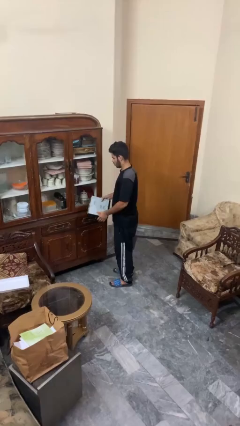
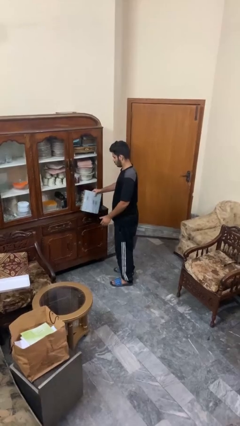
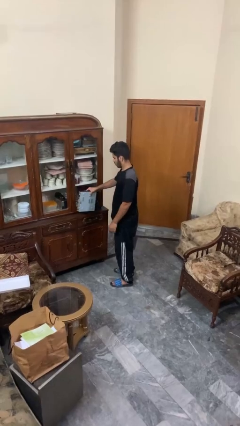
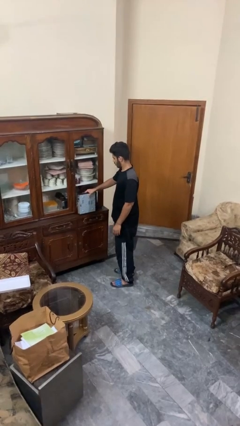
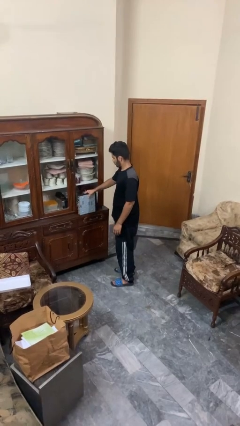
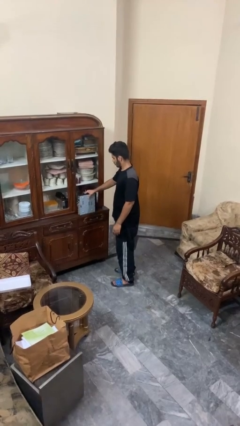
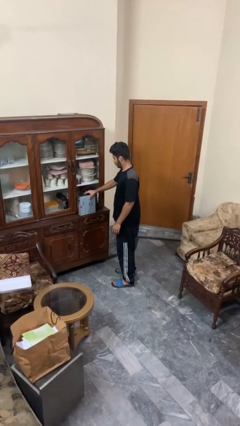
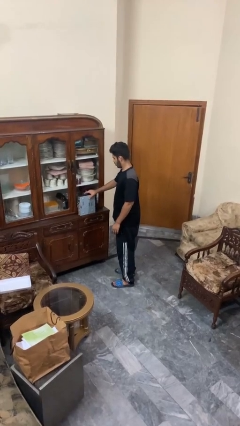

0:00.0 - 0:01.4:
person puts down object on countertop

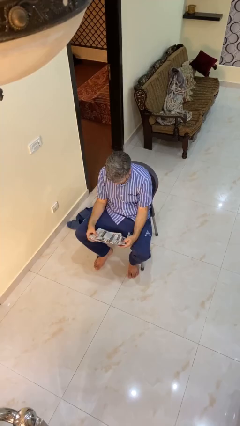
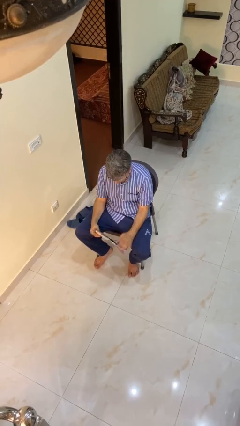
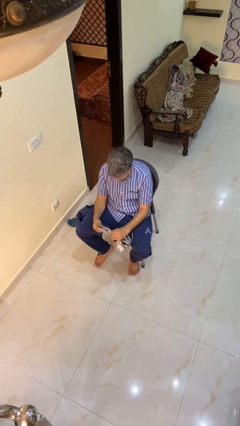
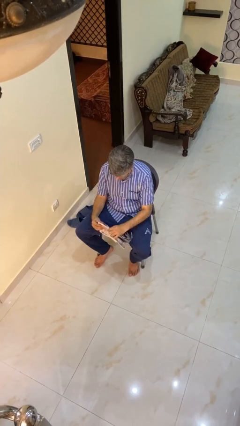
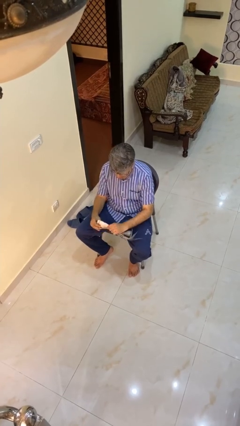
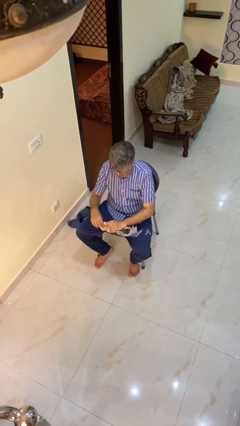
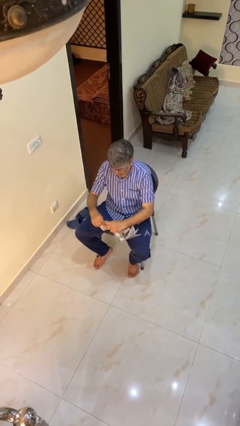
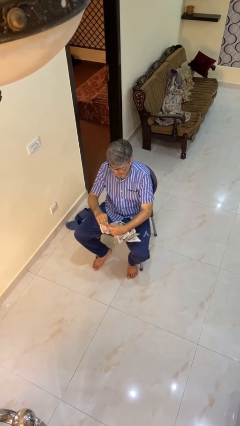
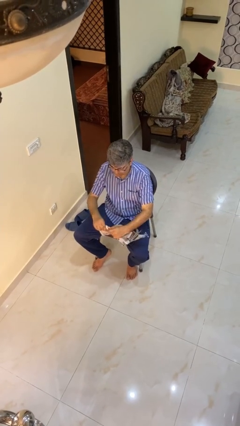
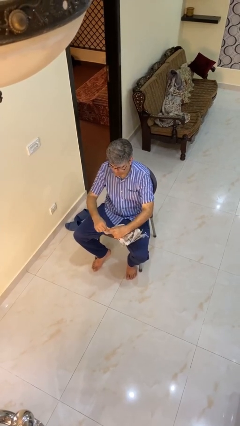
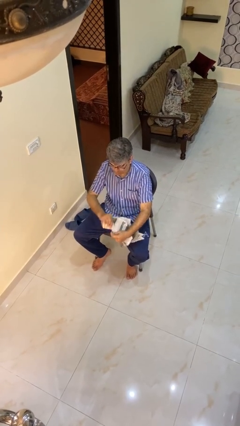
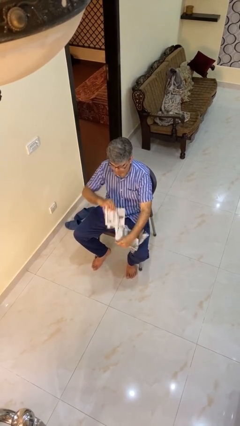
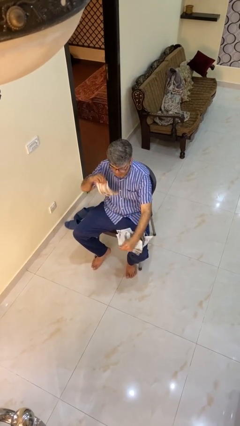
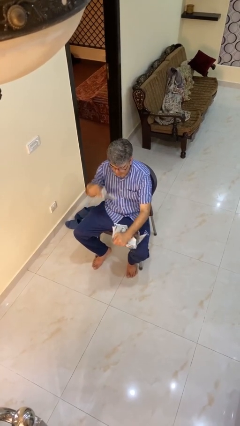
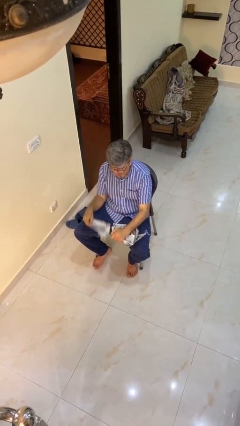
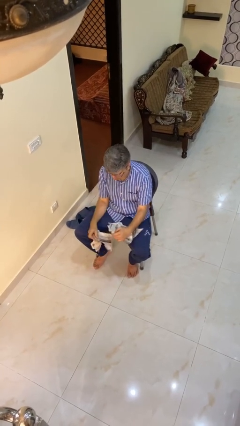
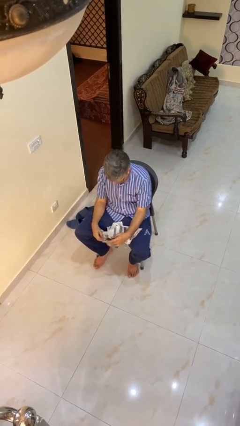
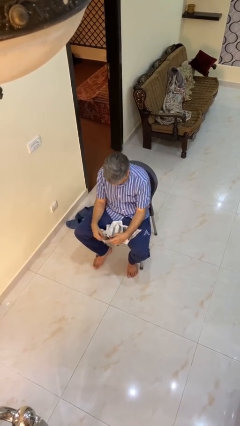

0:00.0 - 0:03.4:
person tears paper

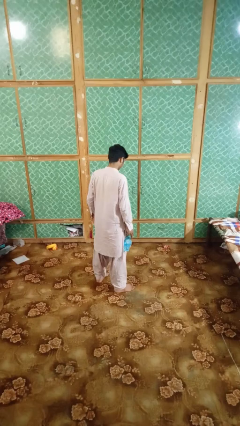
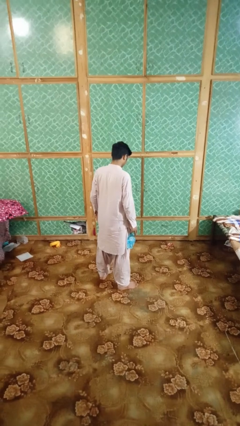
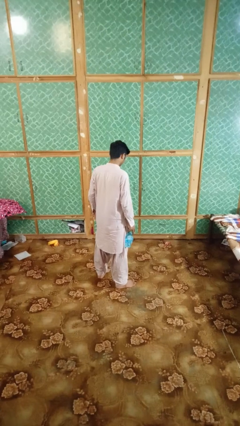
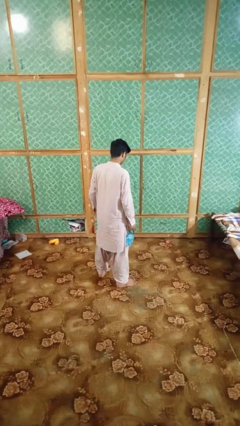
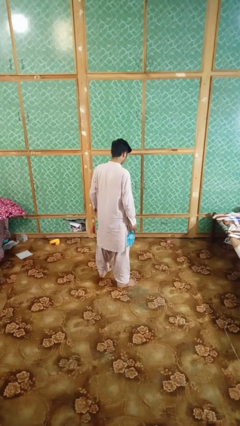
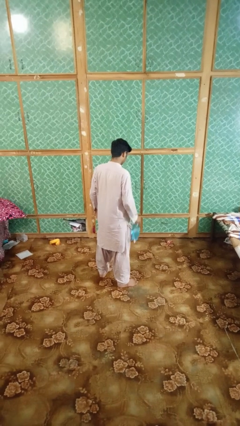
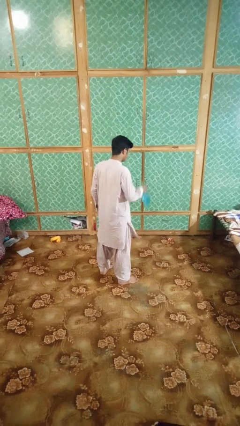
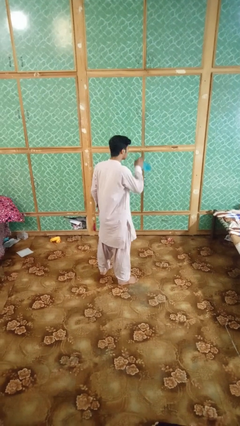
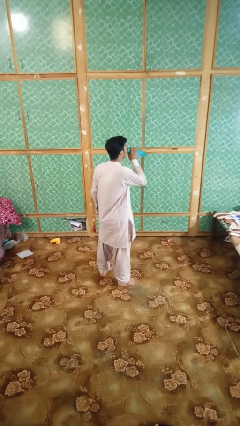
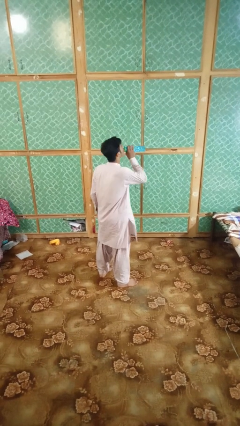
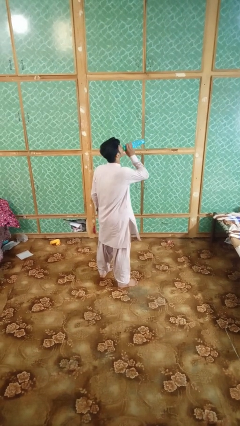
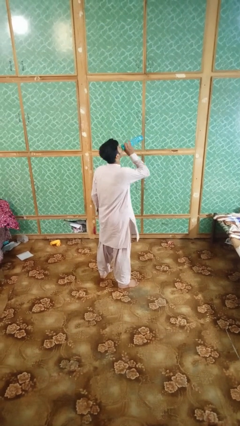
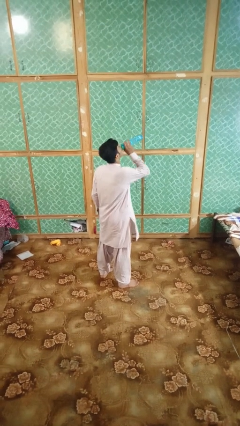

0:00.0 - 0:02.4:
person drinks from bottle

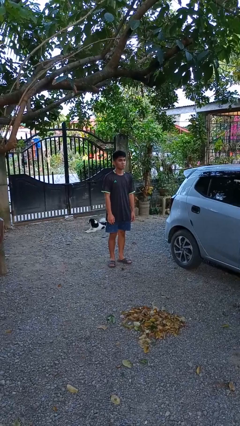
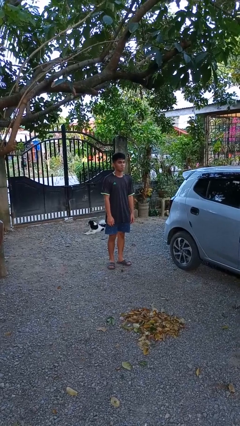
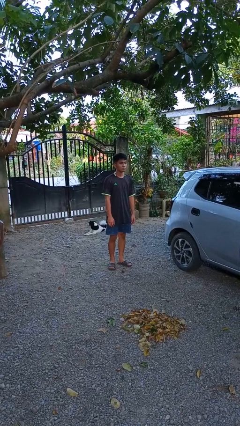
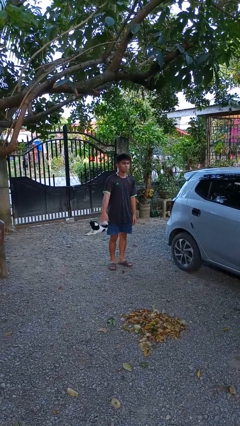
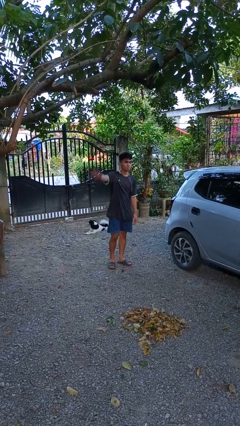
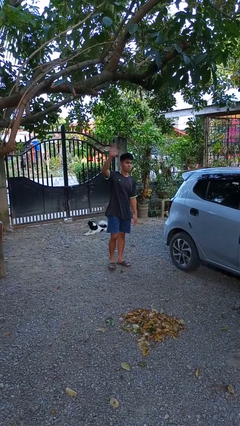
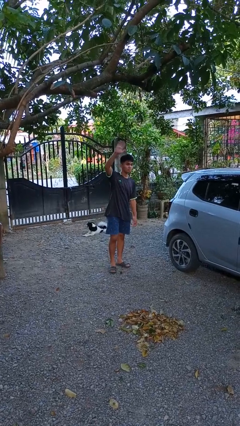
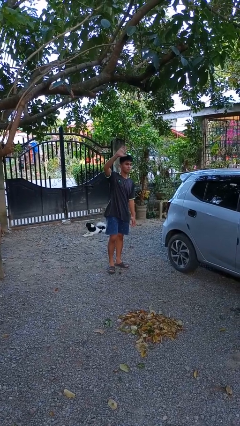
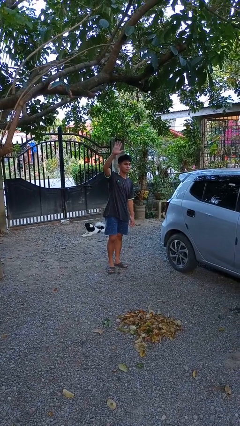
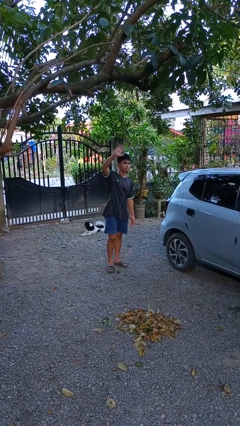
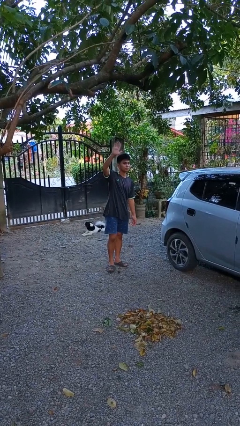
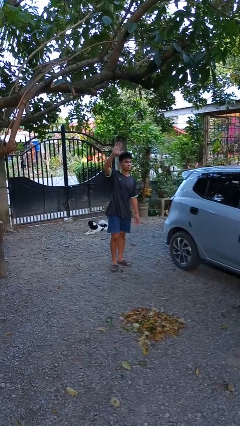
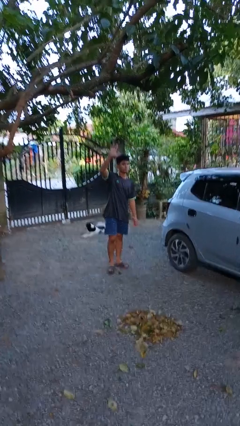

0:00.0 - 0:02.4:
person waves at person

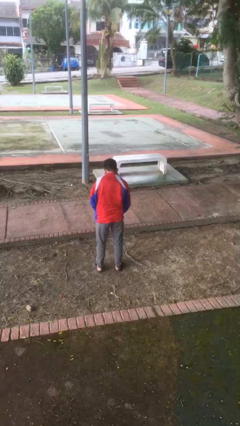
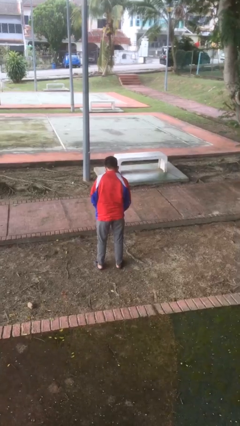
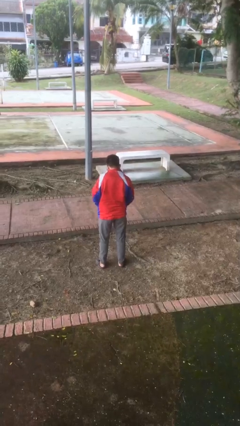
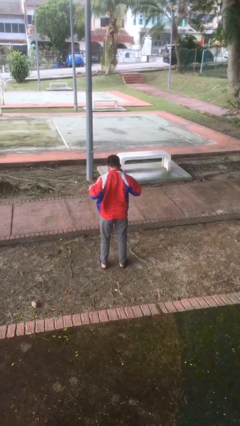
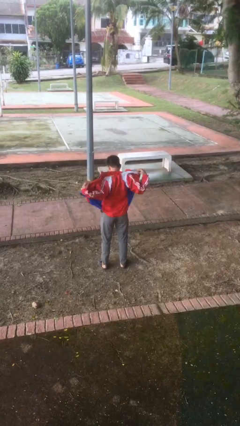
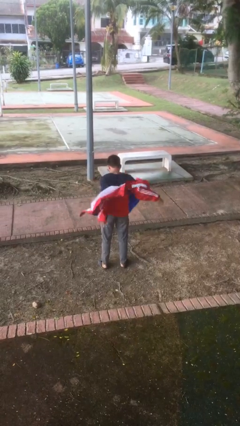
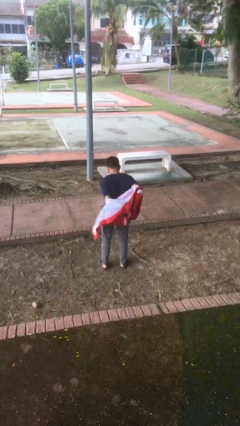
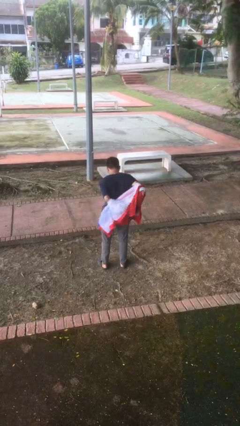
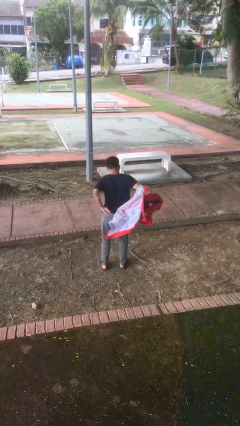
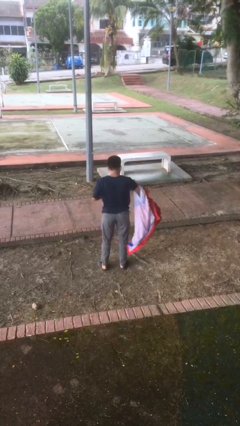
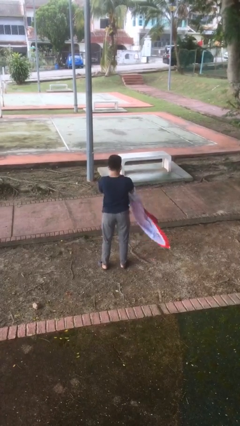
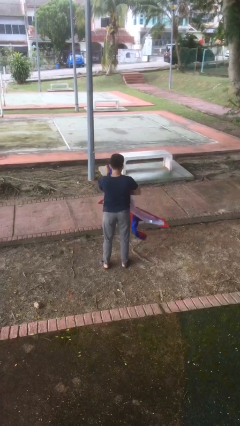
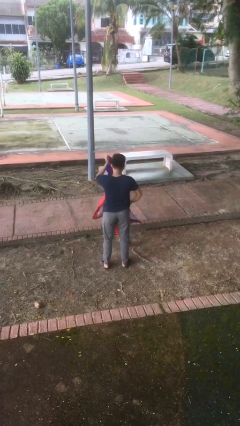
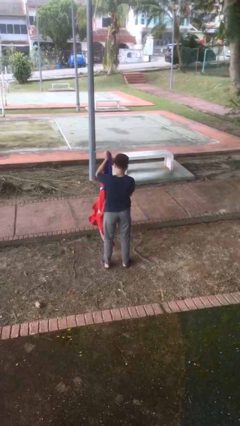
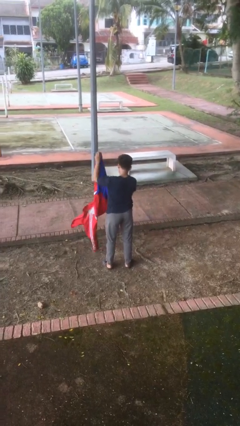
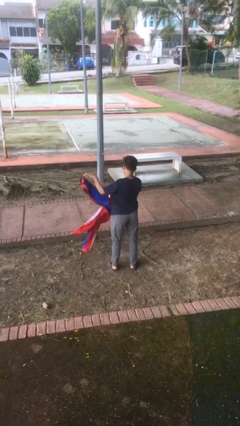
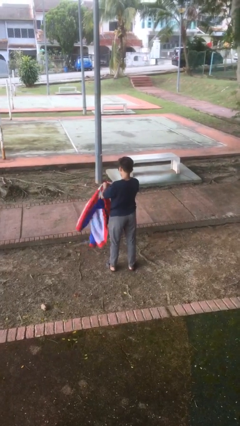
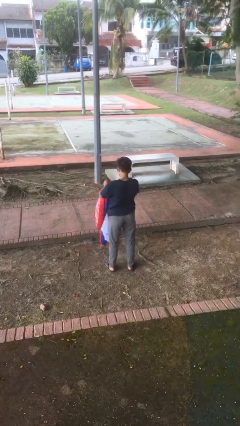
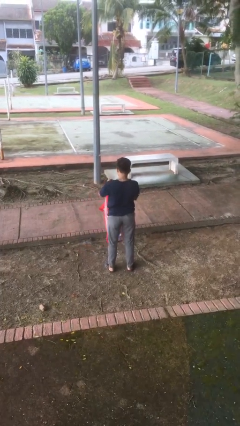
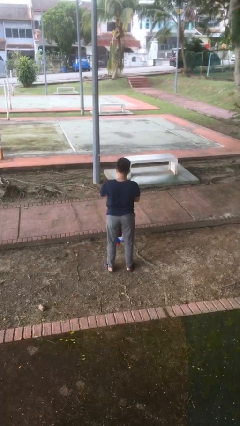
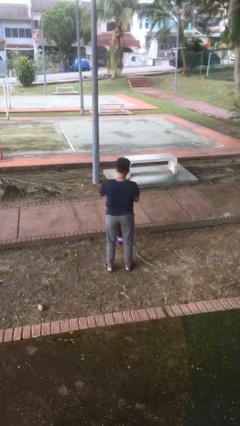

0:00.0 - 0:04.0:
person takes off jacket

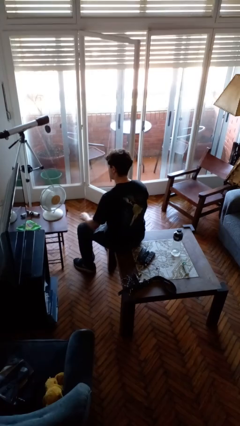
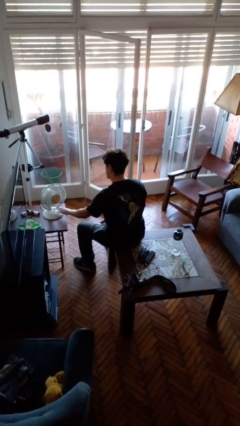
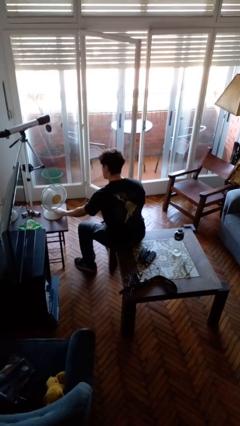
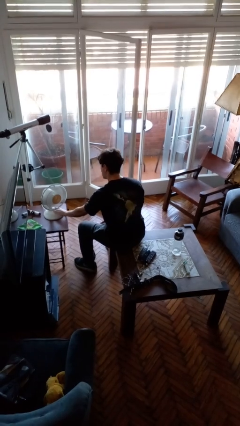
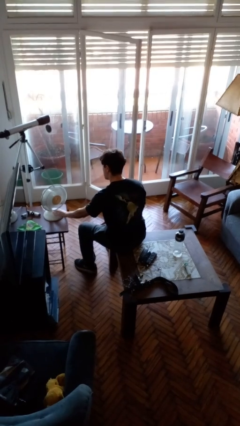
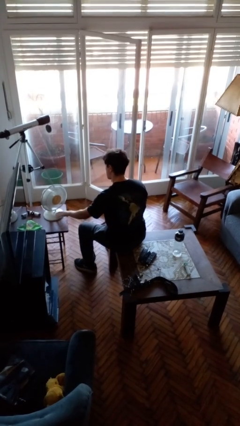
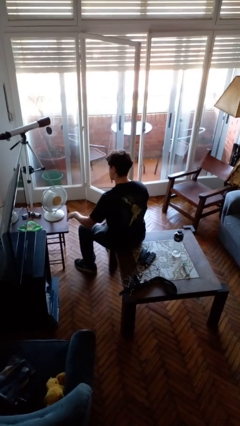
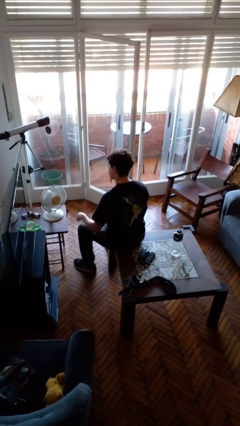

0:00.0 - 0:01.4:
person turns off fan

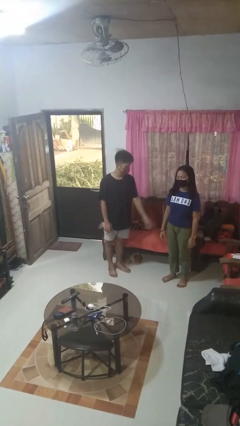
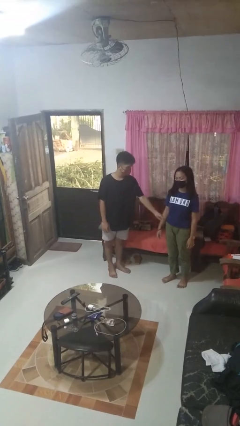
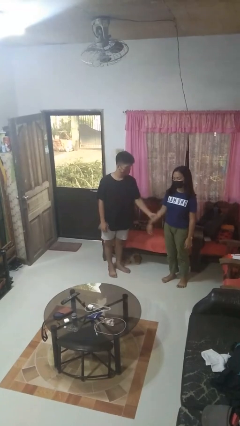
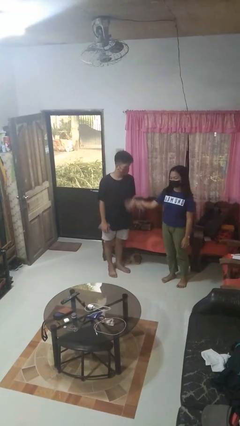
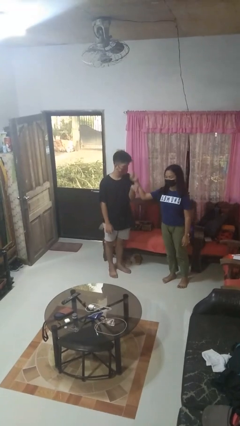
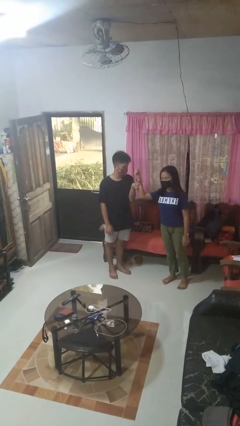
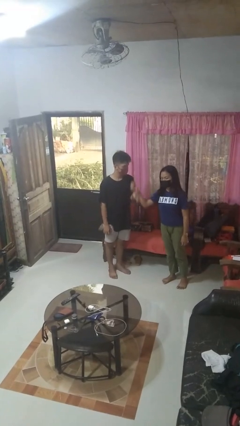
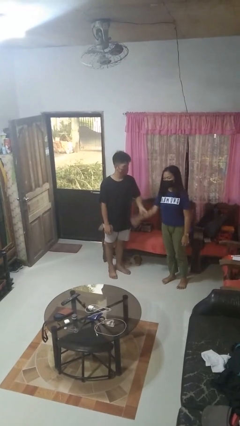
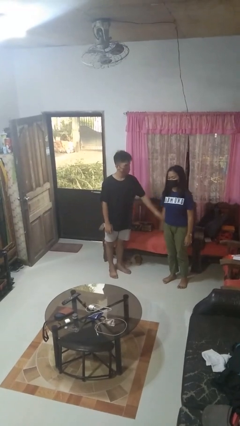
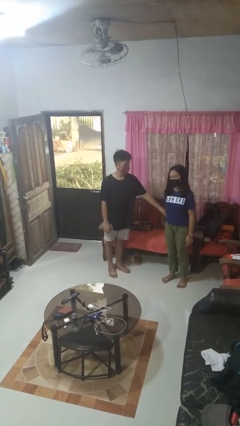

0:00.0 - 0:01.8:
person grabs person by forearm
